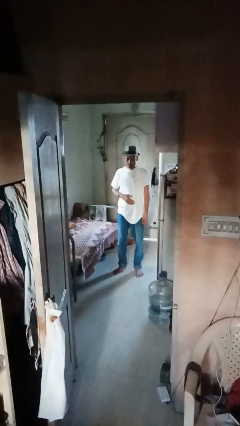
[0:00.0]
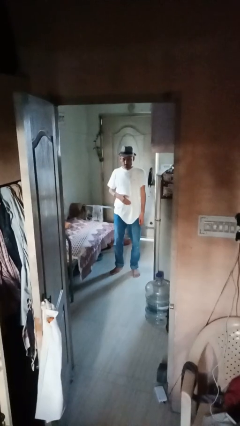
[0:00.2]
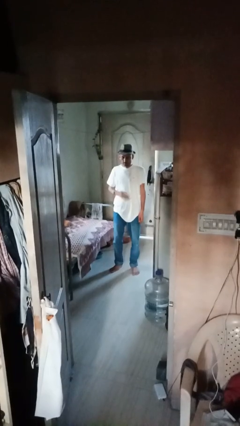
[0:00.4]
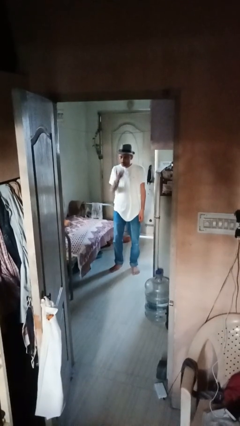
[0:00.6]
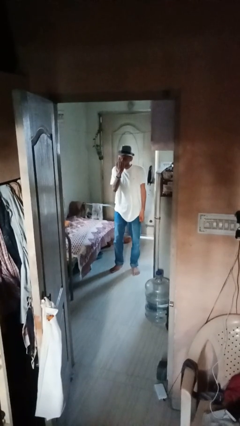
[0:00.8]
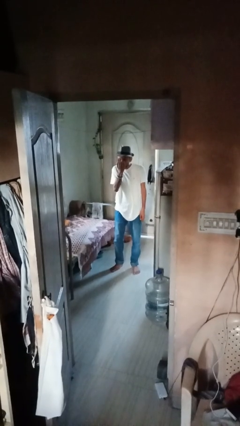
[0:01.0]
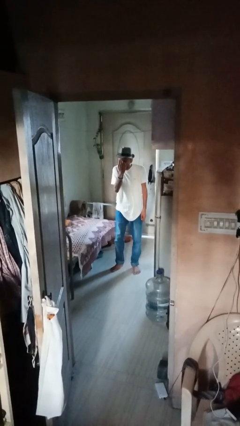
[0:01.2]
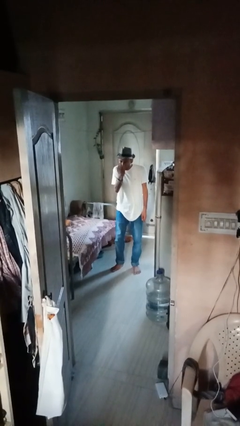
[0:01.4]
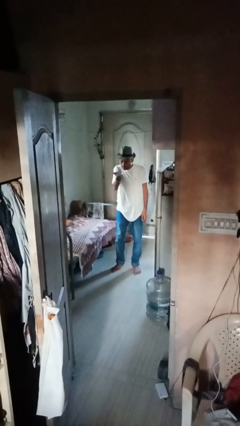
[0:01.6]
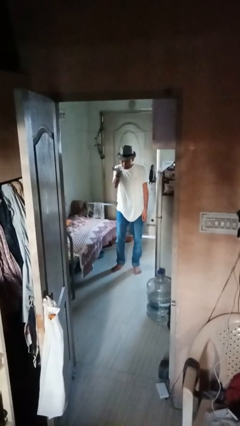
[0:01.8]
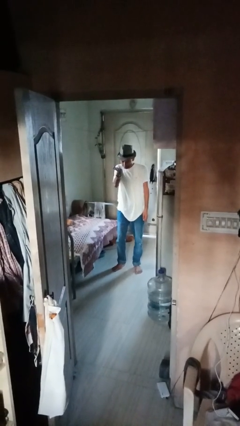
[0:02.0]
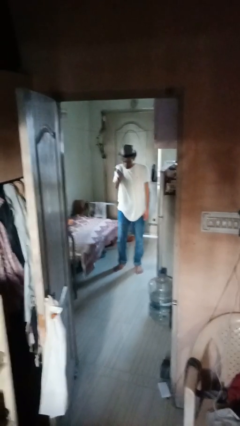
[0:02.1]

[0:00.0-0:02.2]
person gestures blow kiss

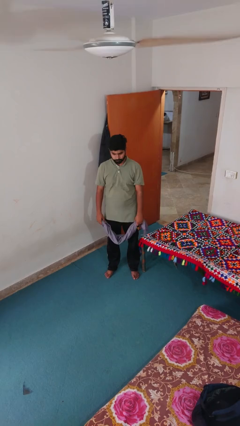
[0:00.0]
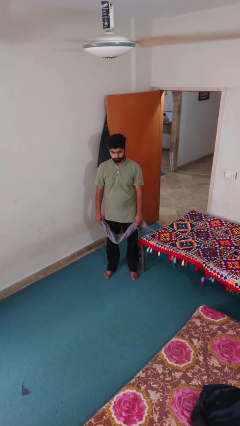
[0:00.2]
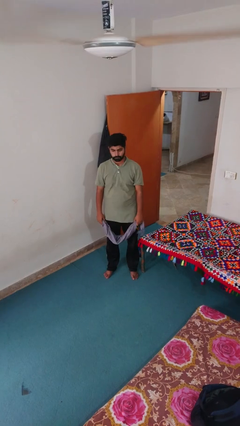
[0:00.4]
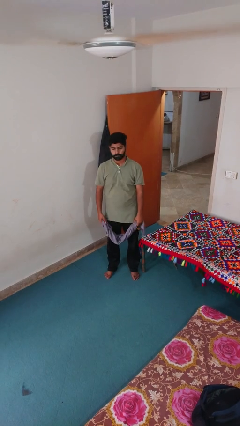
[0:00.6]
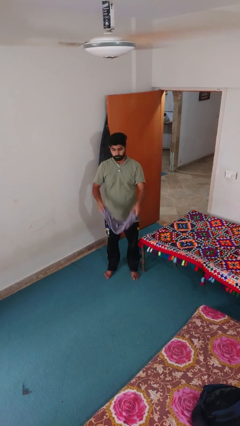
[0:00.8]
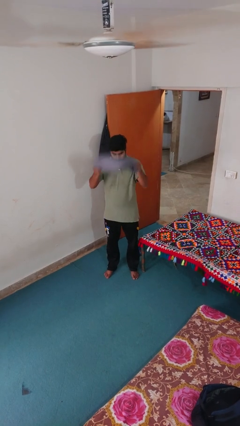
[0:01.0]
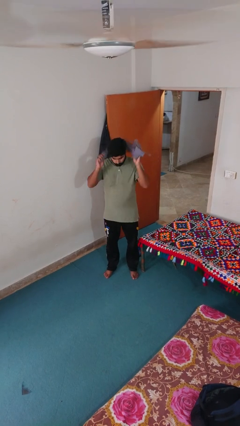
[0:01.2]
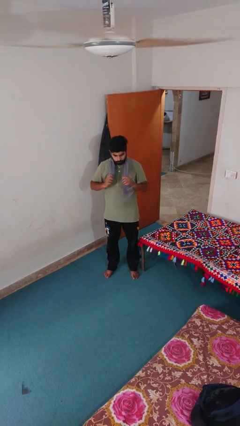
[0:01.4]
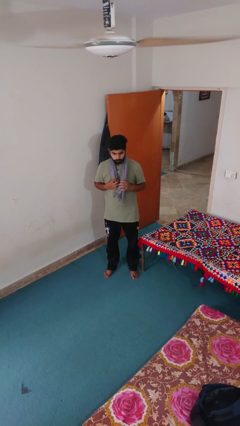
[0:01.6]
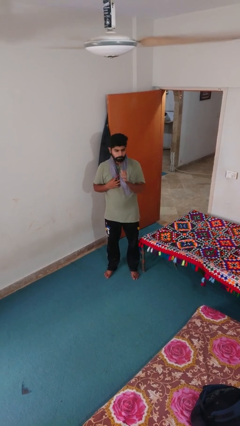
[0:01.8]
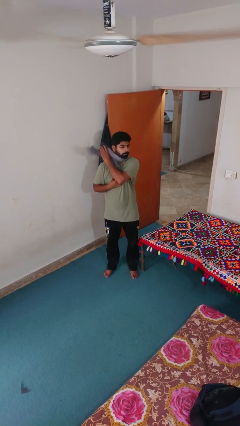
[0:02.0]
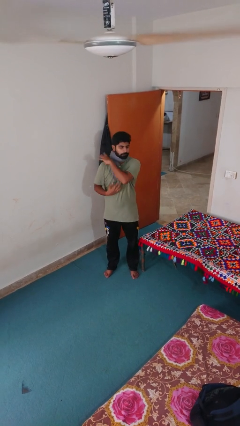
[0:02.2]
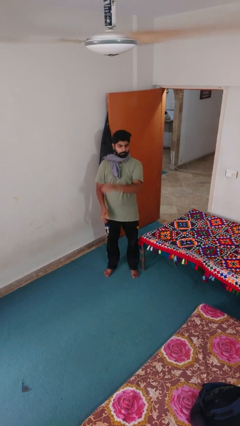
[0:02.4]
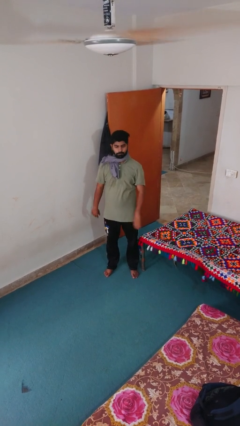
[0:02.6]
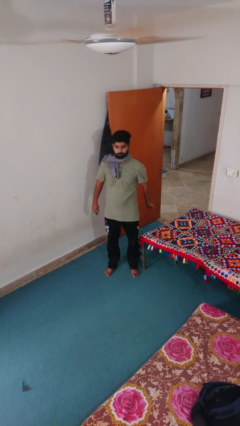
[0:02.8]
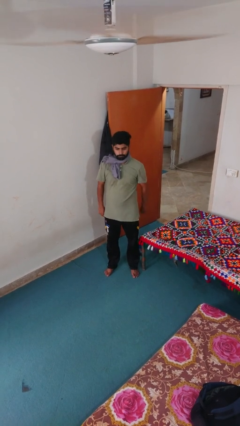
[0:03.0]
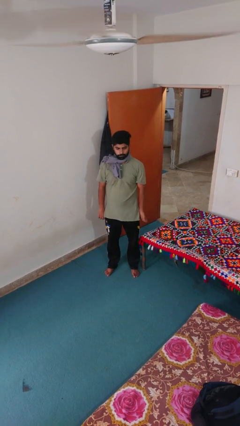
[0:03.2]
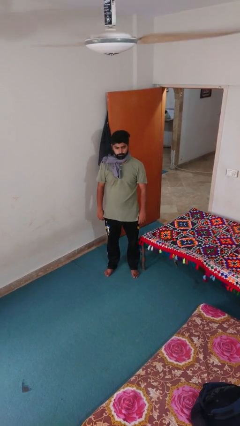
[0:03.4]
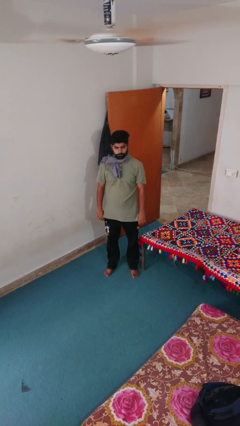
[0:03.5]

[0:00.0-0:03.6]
person puts on scarf

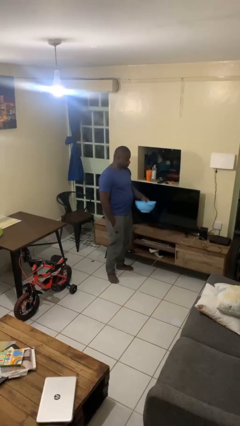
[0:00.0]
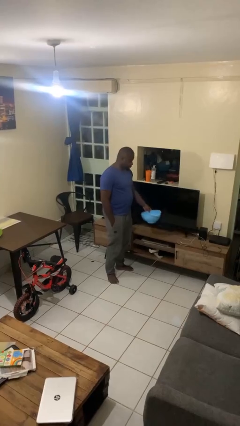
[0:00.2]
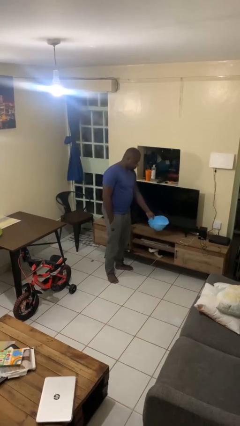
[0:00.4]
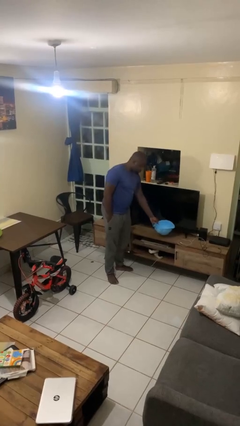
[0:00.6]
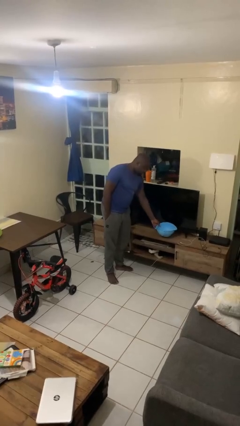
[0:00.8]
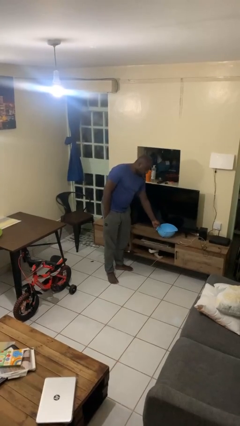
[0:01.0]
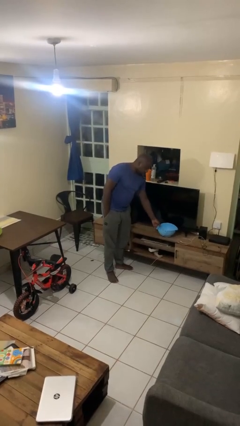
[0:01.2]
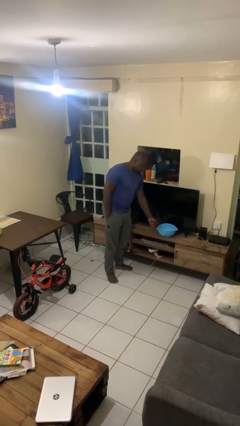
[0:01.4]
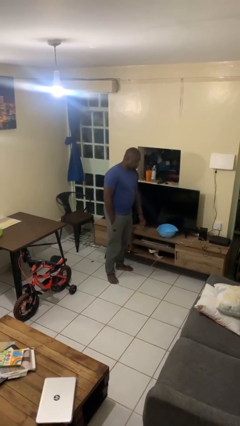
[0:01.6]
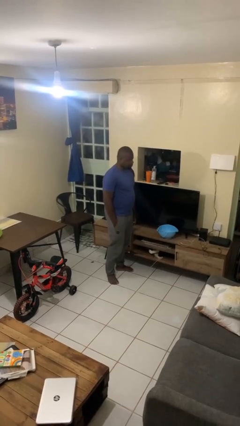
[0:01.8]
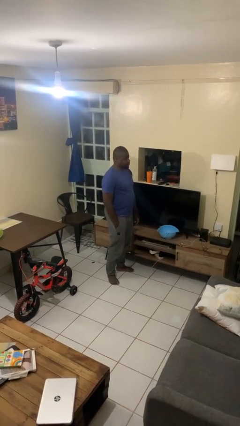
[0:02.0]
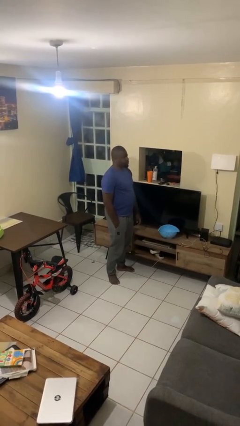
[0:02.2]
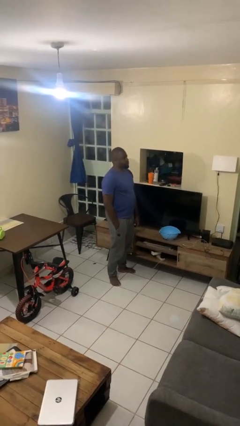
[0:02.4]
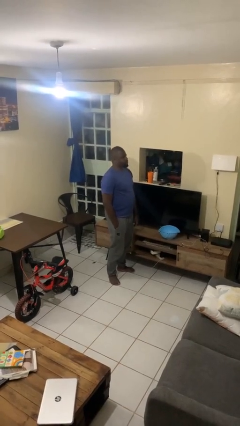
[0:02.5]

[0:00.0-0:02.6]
person puts down object on countertop

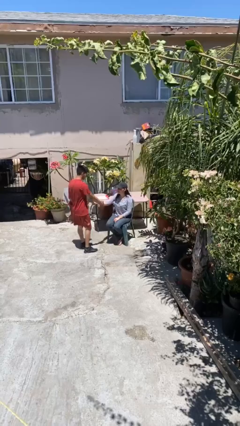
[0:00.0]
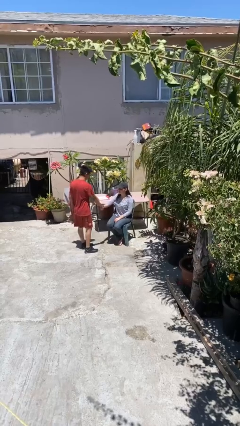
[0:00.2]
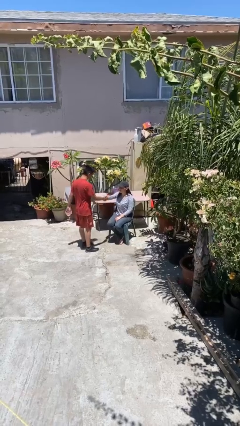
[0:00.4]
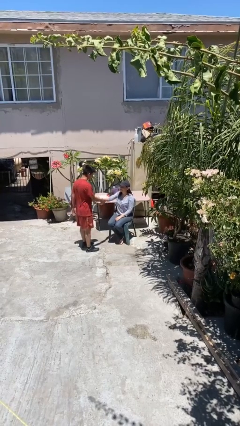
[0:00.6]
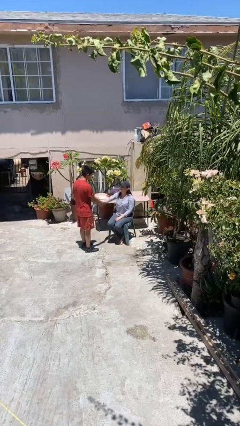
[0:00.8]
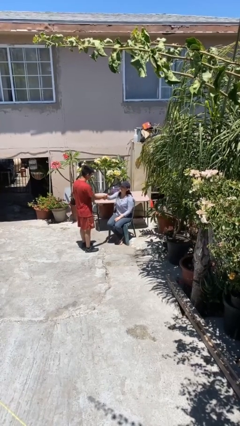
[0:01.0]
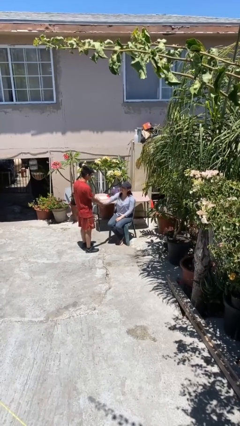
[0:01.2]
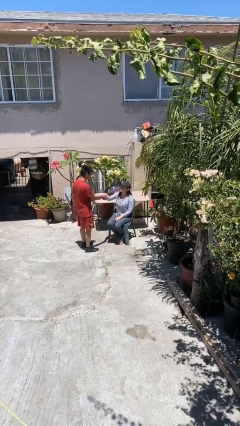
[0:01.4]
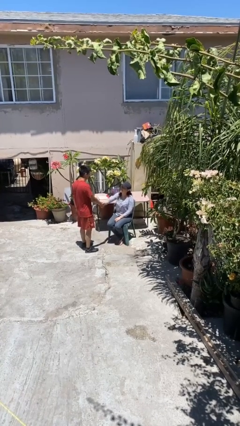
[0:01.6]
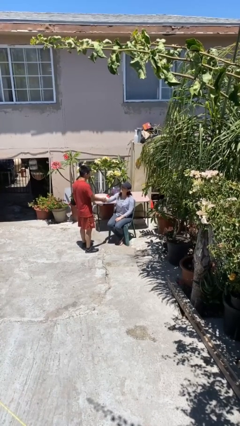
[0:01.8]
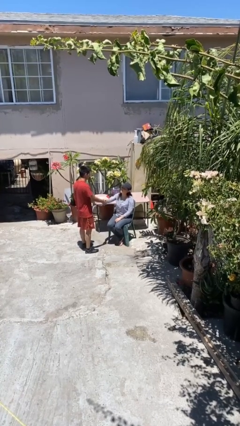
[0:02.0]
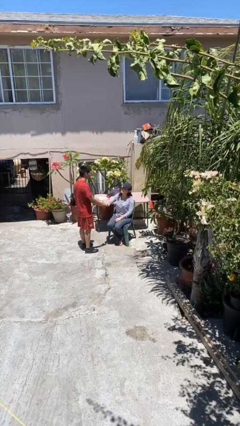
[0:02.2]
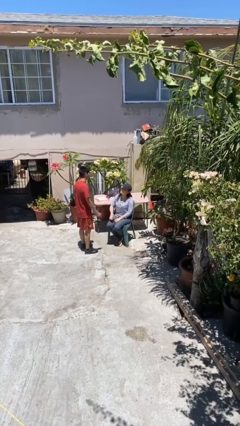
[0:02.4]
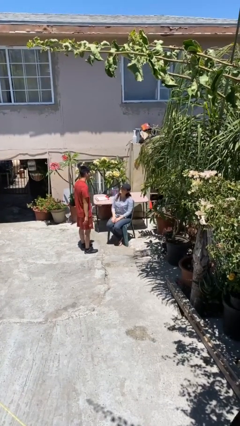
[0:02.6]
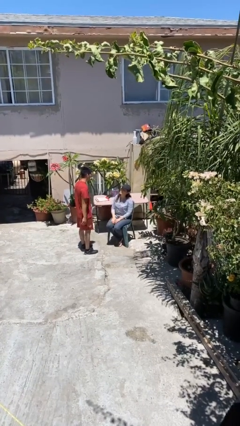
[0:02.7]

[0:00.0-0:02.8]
person shakes hand

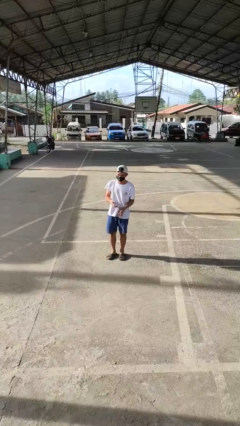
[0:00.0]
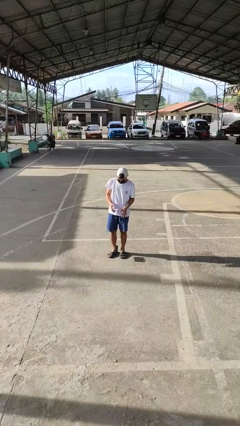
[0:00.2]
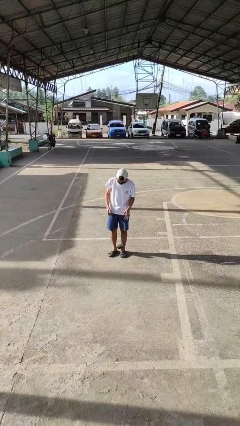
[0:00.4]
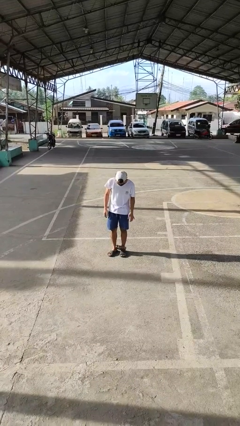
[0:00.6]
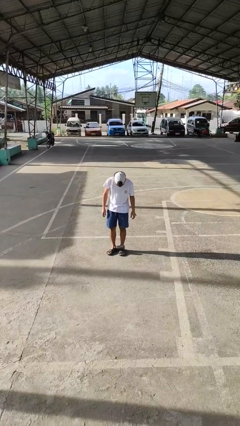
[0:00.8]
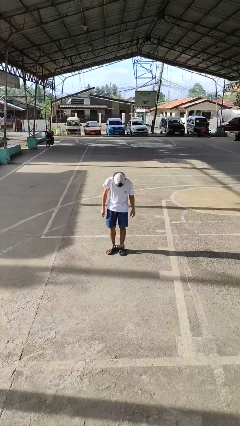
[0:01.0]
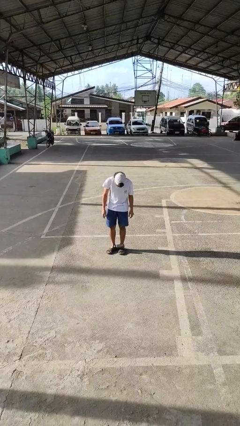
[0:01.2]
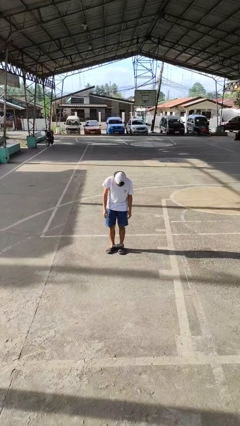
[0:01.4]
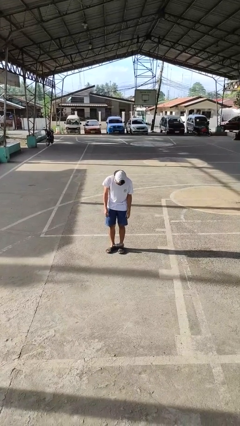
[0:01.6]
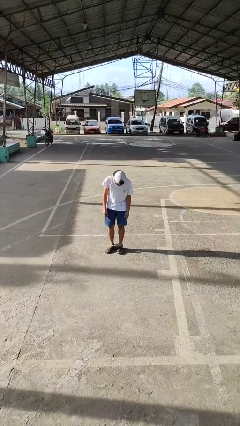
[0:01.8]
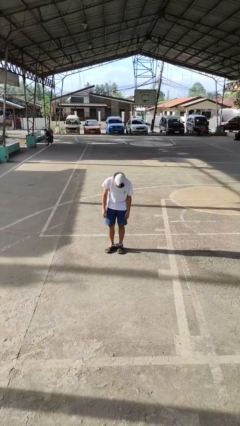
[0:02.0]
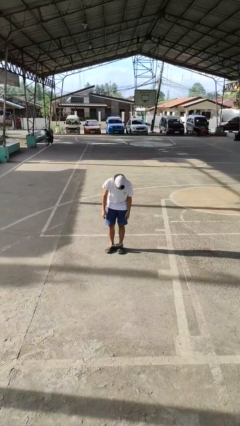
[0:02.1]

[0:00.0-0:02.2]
person drops object

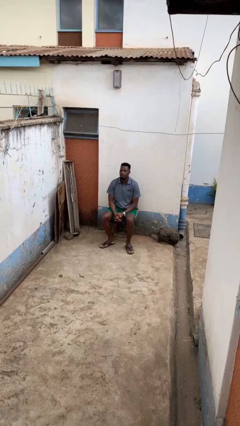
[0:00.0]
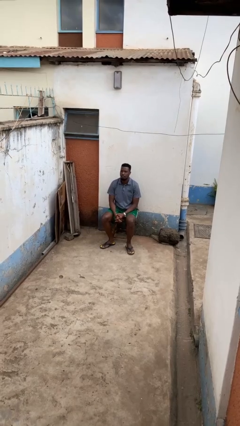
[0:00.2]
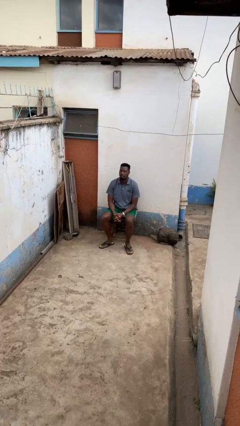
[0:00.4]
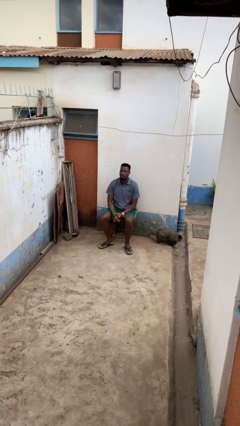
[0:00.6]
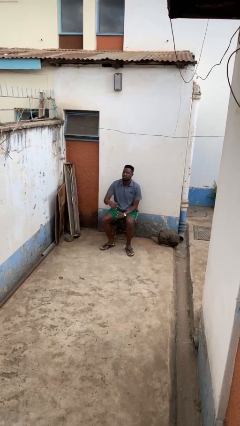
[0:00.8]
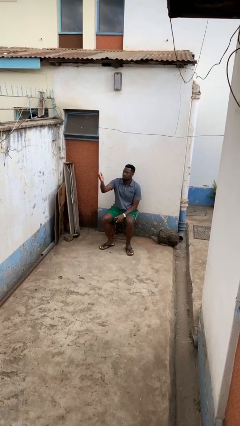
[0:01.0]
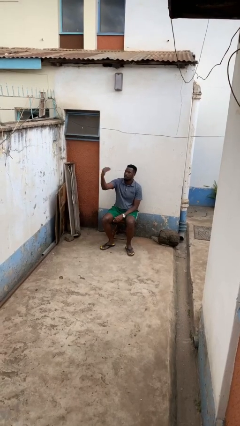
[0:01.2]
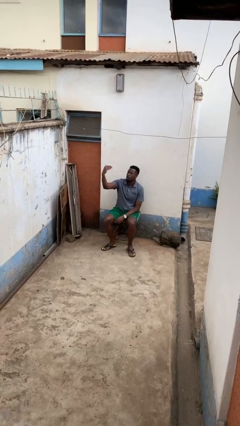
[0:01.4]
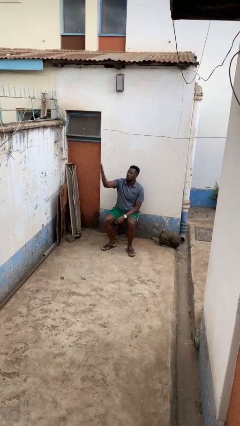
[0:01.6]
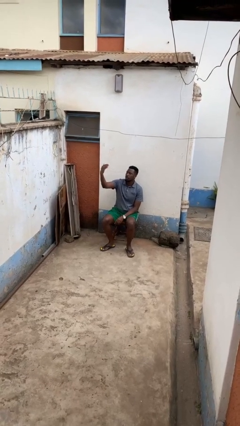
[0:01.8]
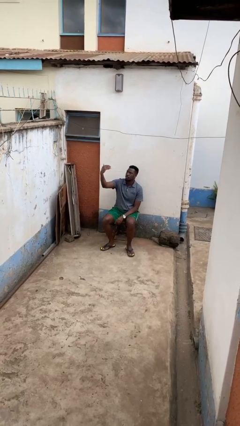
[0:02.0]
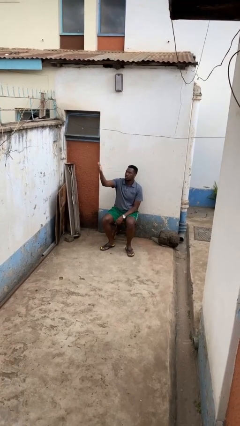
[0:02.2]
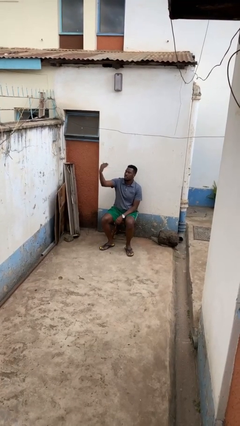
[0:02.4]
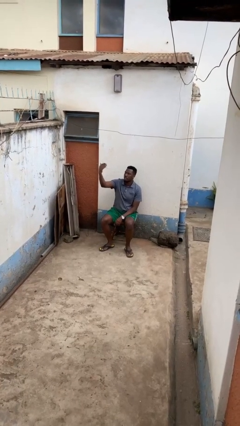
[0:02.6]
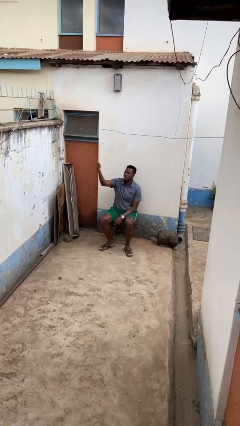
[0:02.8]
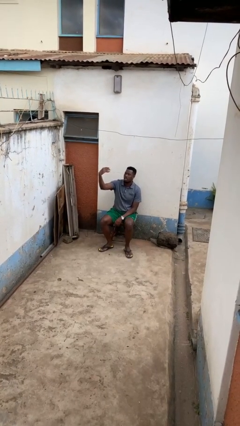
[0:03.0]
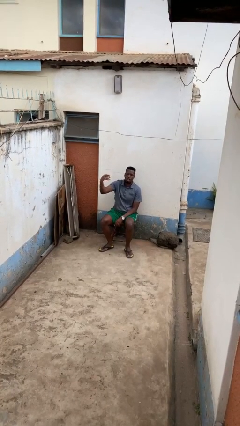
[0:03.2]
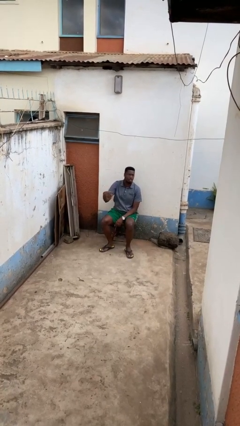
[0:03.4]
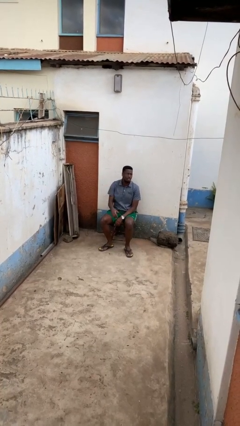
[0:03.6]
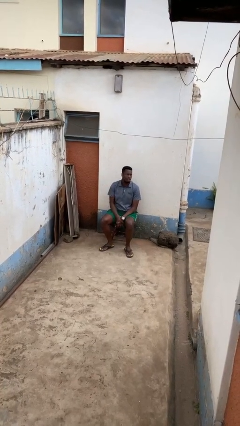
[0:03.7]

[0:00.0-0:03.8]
person gestures come here

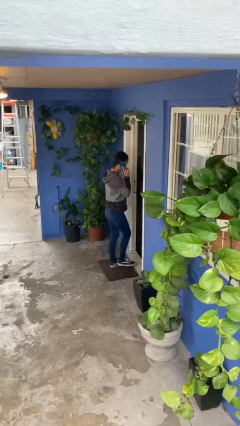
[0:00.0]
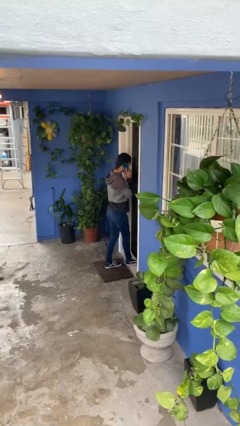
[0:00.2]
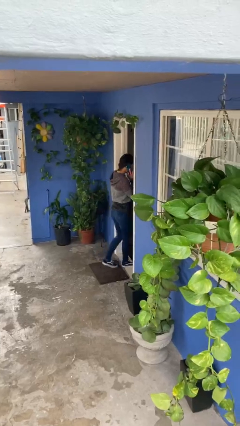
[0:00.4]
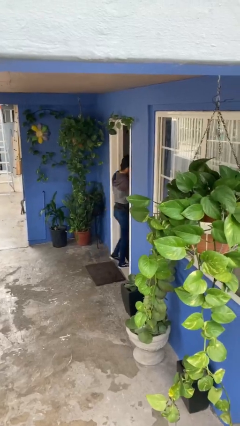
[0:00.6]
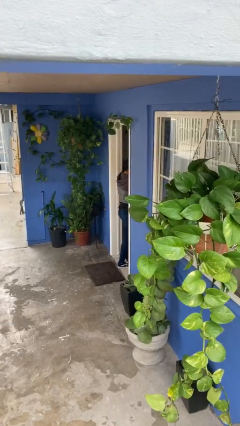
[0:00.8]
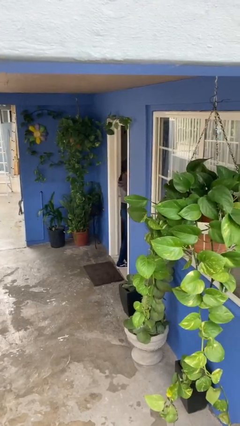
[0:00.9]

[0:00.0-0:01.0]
person exits scene through structure
